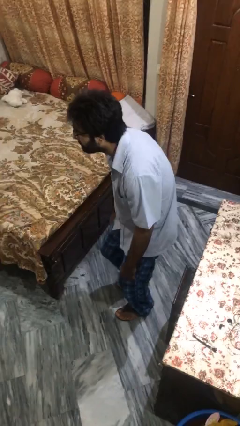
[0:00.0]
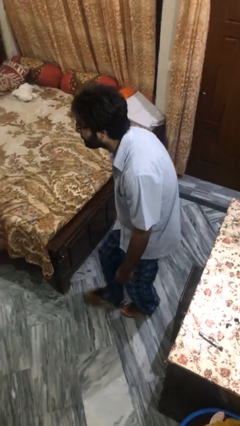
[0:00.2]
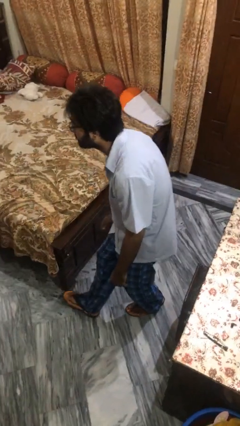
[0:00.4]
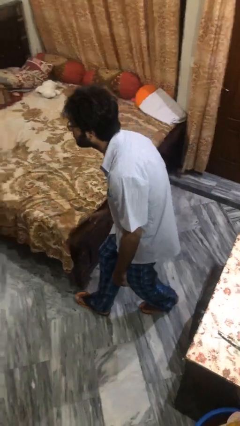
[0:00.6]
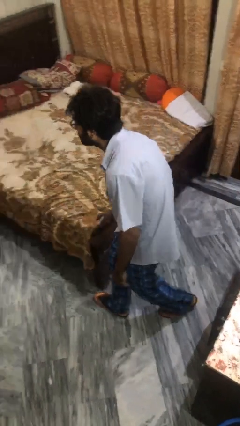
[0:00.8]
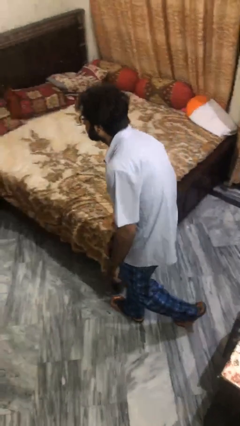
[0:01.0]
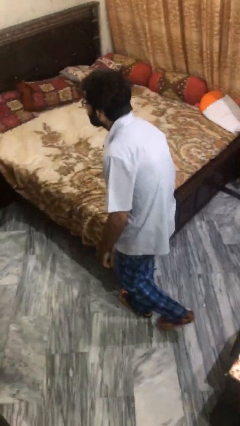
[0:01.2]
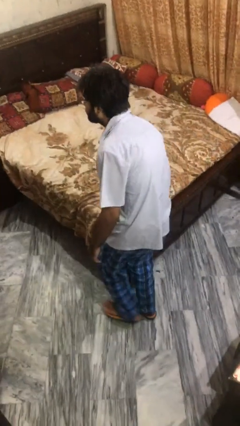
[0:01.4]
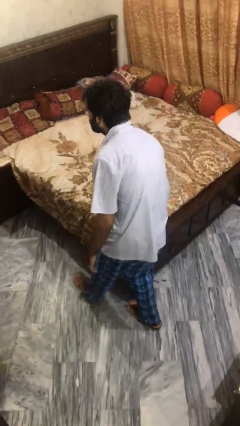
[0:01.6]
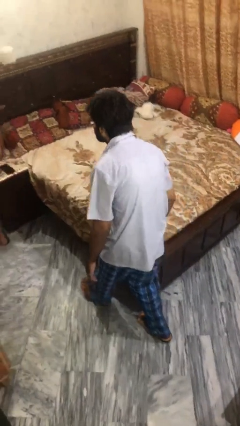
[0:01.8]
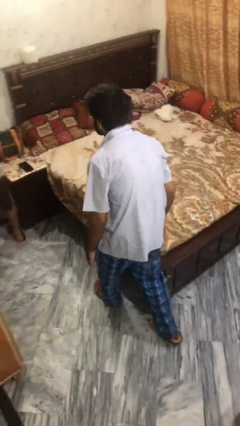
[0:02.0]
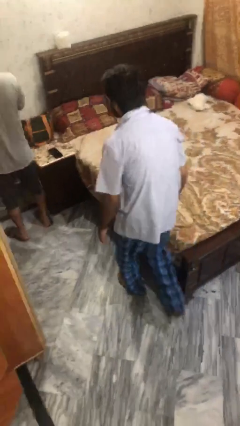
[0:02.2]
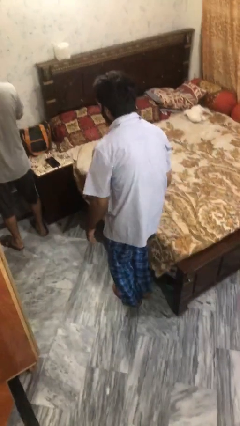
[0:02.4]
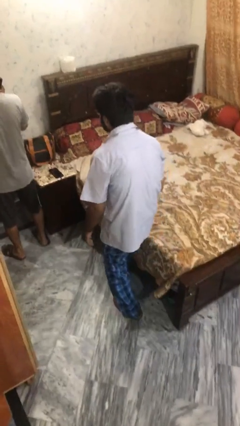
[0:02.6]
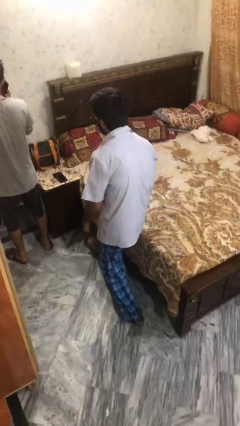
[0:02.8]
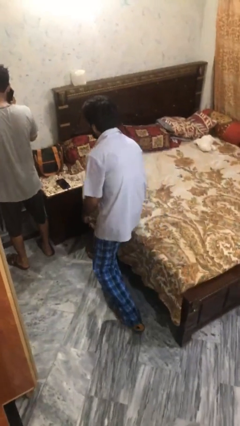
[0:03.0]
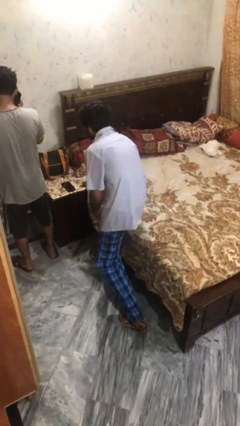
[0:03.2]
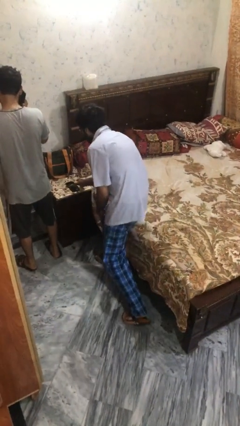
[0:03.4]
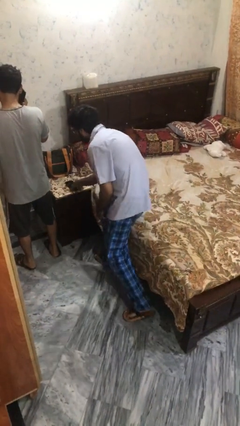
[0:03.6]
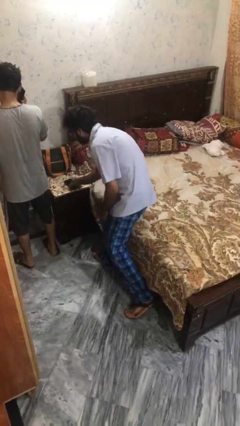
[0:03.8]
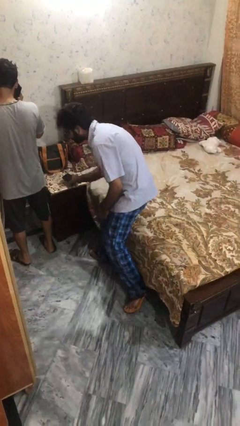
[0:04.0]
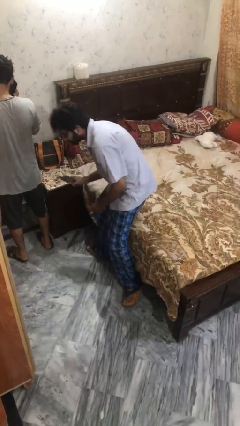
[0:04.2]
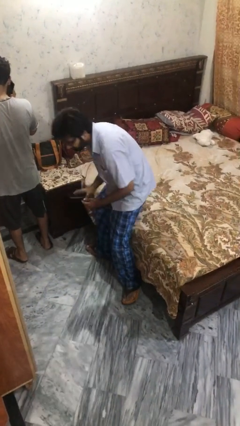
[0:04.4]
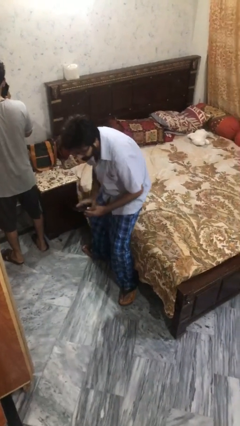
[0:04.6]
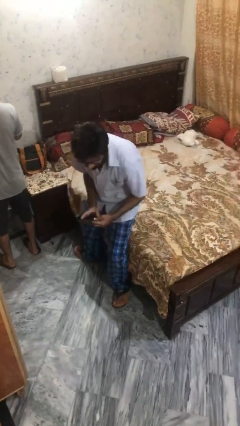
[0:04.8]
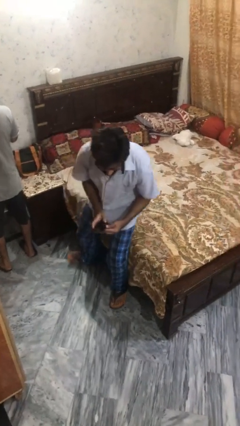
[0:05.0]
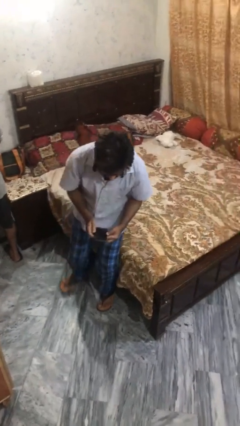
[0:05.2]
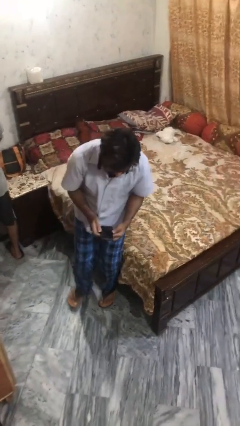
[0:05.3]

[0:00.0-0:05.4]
person steals object from person

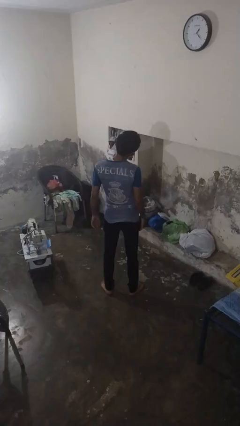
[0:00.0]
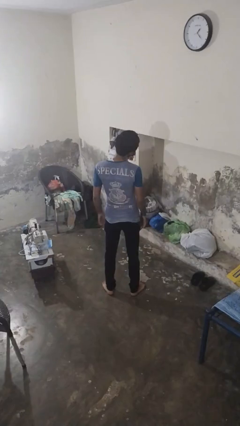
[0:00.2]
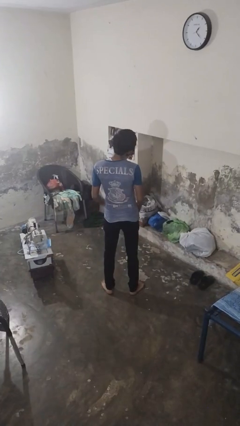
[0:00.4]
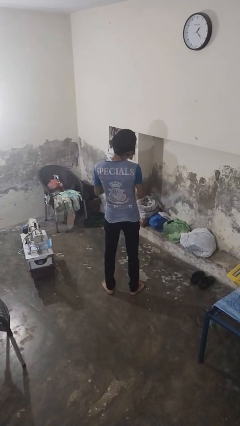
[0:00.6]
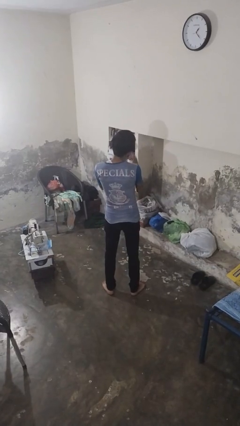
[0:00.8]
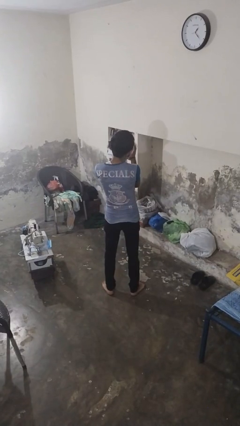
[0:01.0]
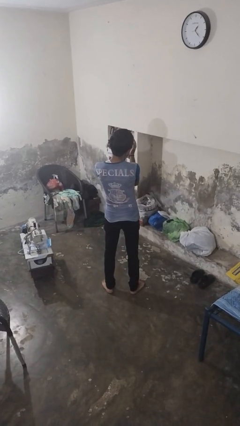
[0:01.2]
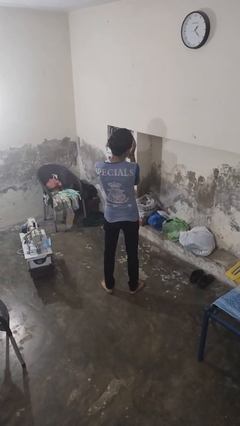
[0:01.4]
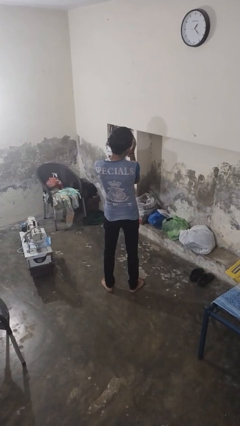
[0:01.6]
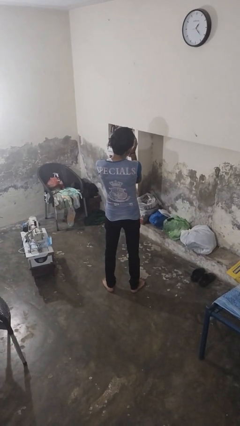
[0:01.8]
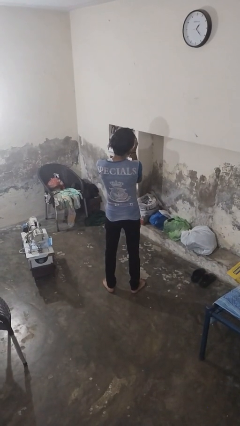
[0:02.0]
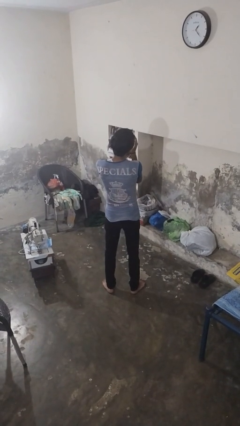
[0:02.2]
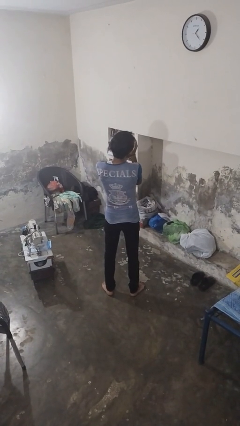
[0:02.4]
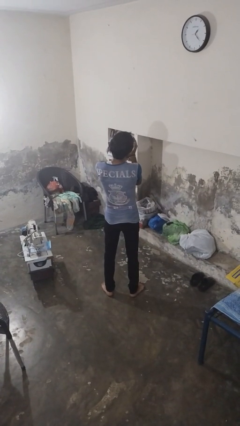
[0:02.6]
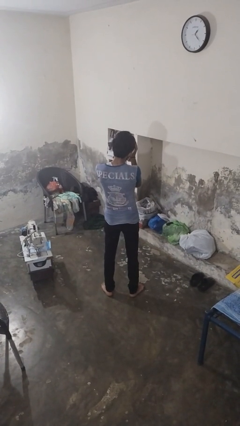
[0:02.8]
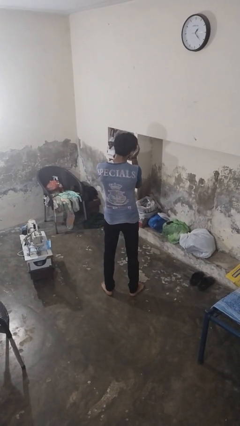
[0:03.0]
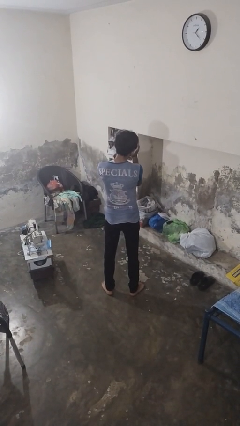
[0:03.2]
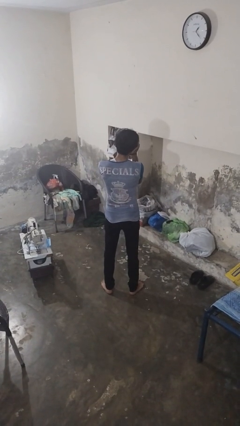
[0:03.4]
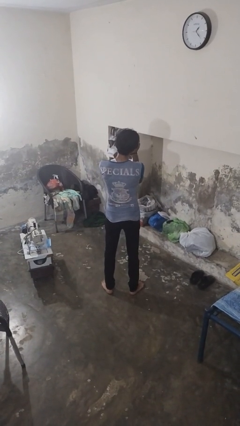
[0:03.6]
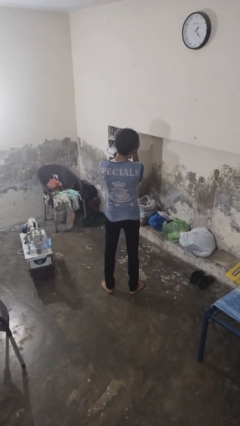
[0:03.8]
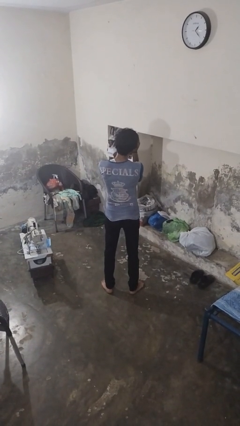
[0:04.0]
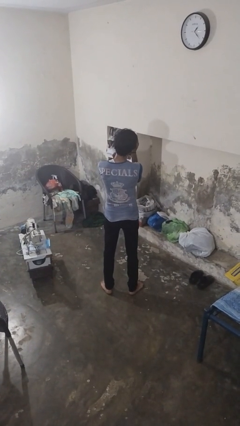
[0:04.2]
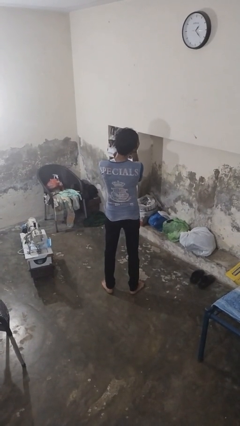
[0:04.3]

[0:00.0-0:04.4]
person prays

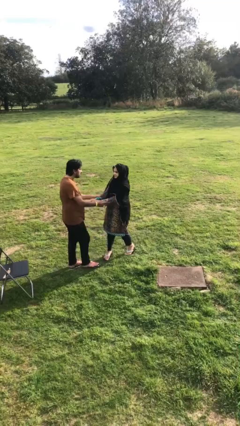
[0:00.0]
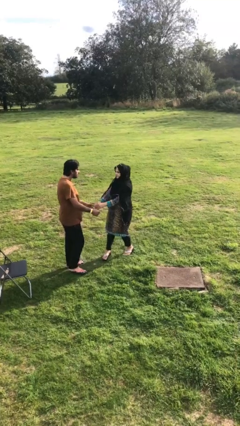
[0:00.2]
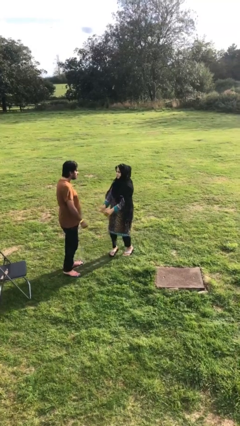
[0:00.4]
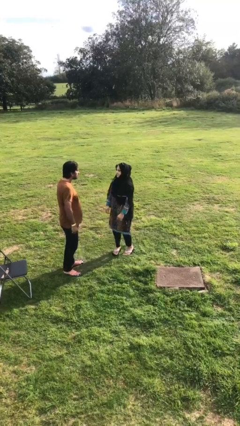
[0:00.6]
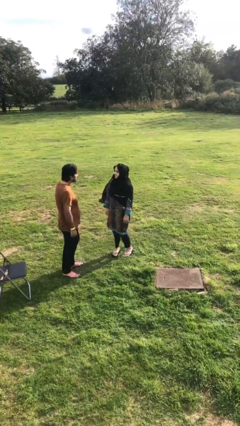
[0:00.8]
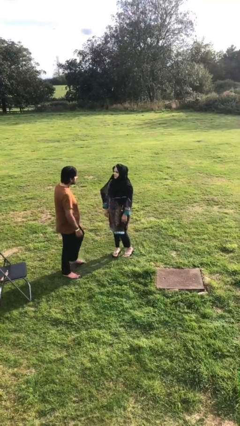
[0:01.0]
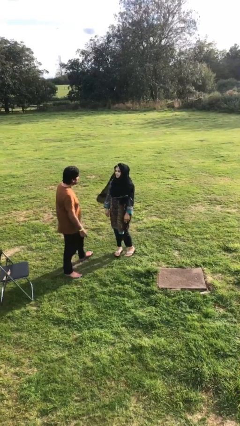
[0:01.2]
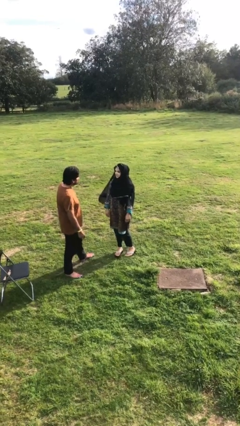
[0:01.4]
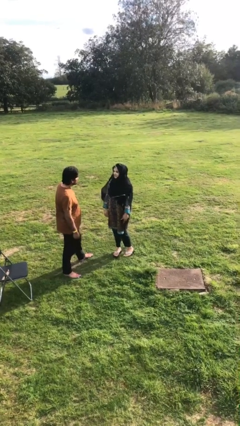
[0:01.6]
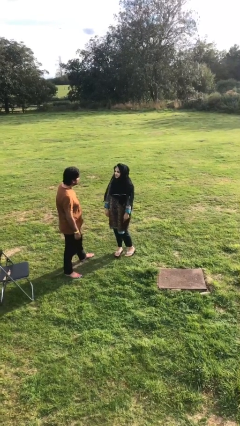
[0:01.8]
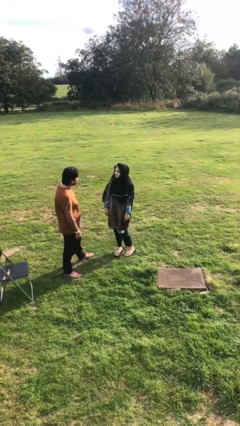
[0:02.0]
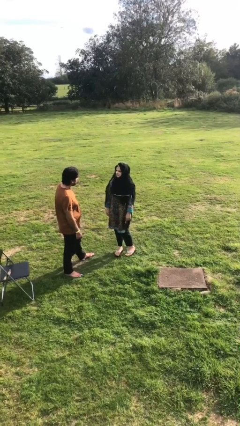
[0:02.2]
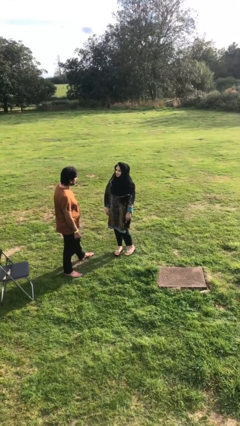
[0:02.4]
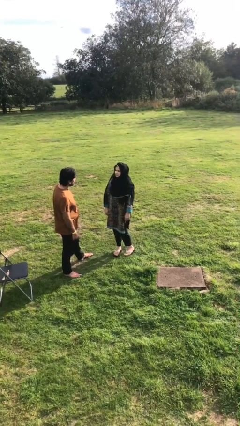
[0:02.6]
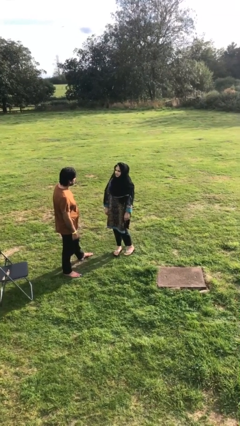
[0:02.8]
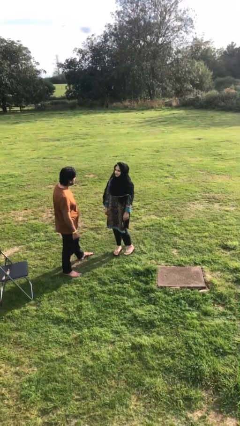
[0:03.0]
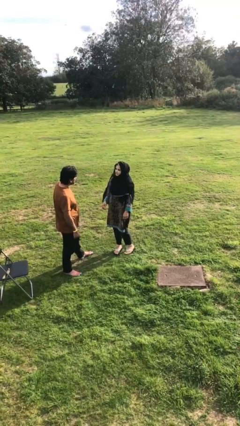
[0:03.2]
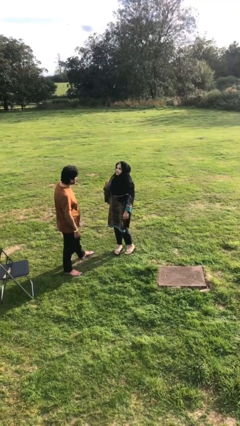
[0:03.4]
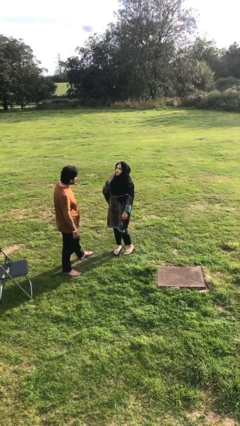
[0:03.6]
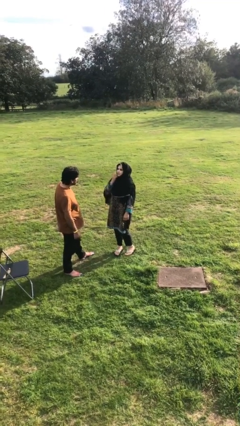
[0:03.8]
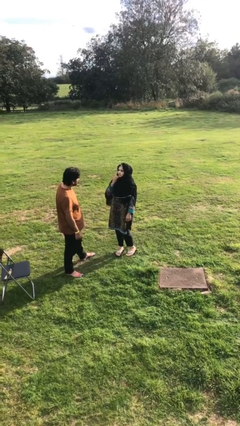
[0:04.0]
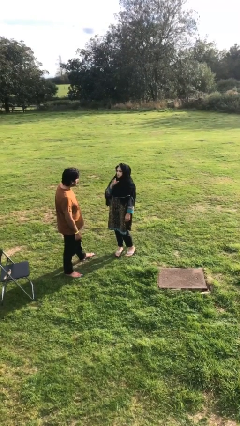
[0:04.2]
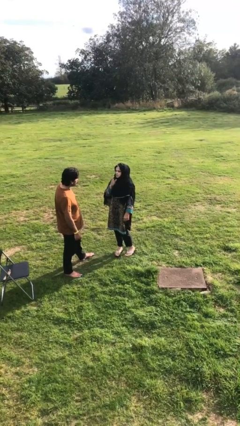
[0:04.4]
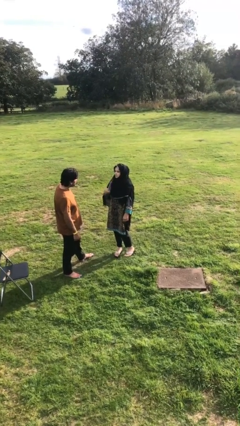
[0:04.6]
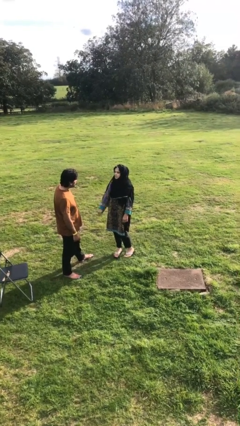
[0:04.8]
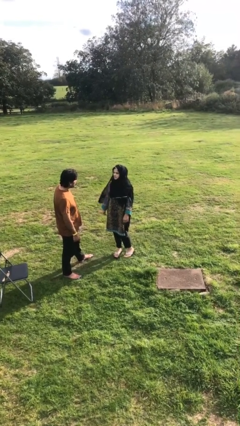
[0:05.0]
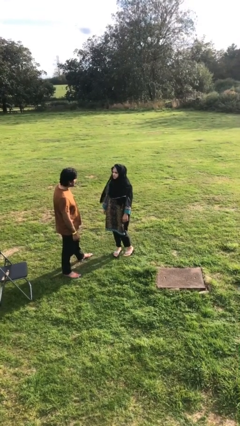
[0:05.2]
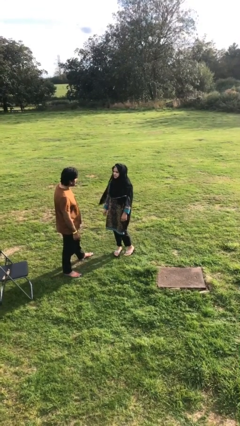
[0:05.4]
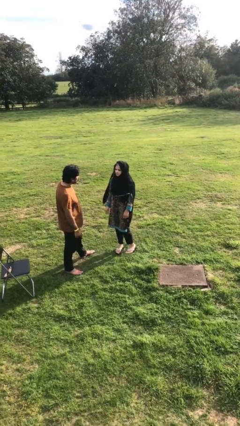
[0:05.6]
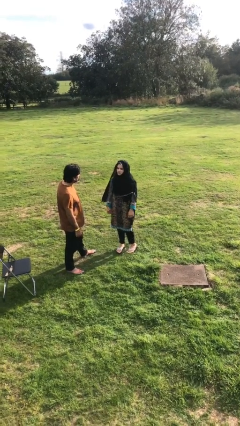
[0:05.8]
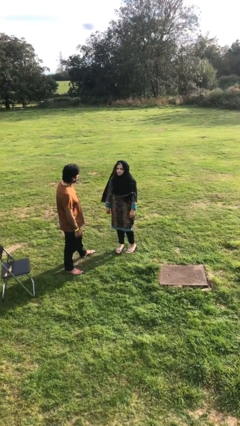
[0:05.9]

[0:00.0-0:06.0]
person talks to person

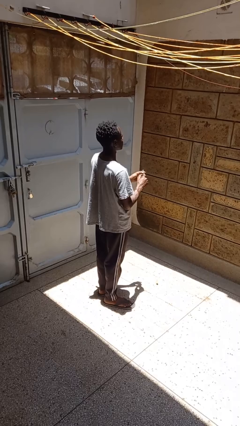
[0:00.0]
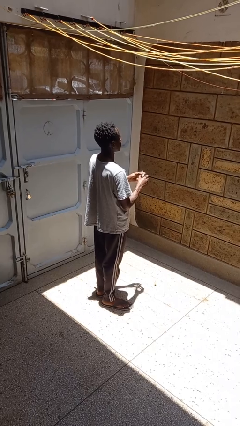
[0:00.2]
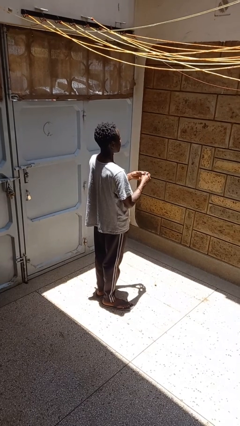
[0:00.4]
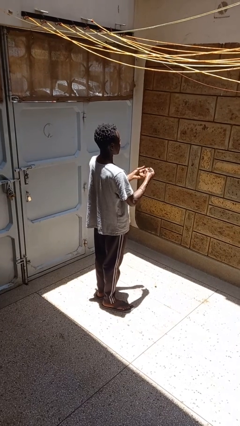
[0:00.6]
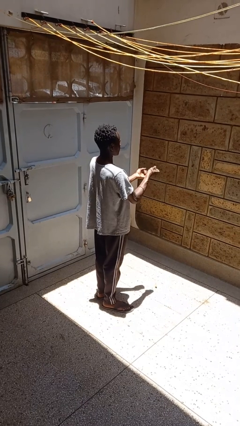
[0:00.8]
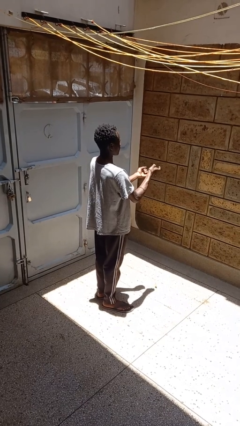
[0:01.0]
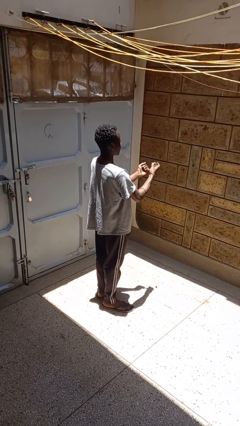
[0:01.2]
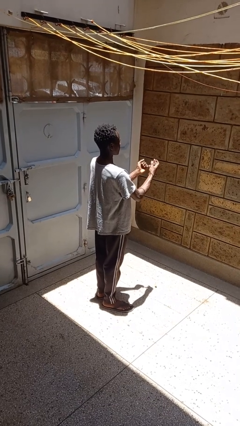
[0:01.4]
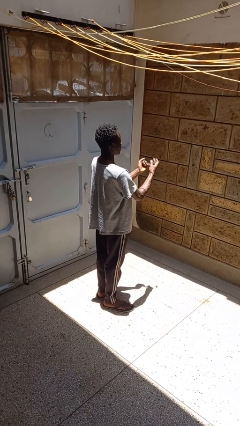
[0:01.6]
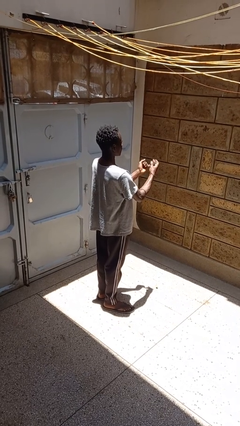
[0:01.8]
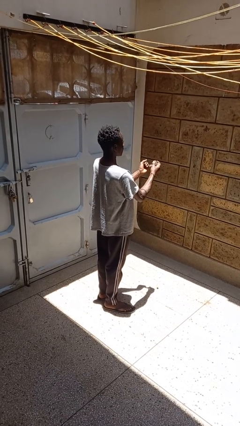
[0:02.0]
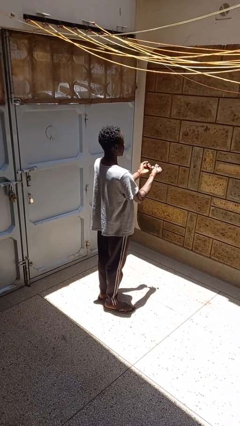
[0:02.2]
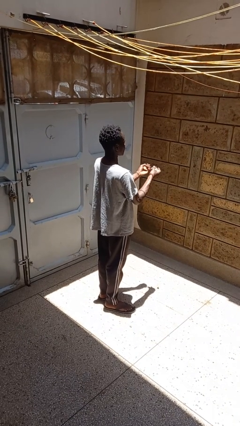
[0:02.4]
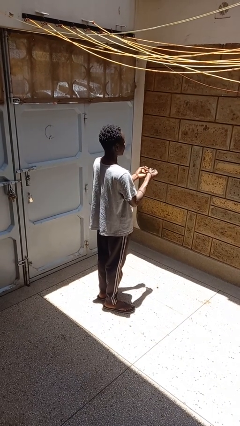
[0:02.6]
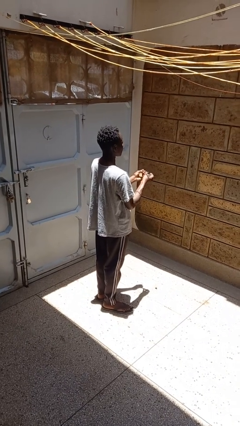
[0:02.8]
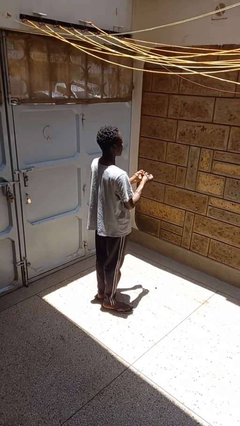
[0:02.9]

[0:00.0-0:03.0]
person clips fingernails
